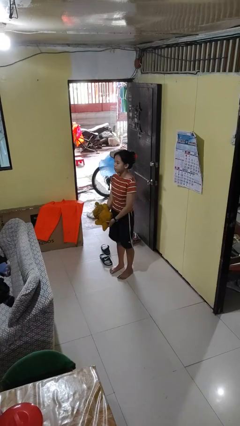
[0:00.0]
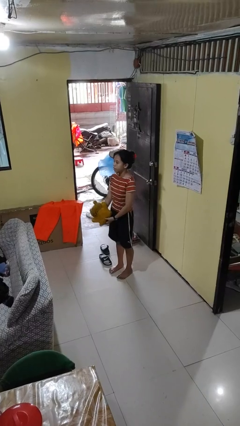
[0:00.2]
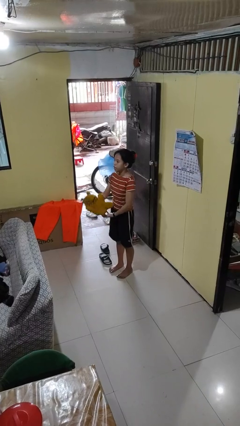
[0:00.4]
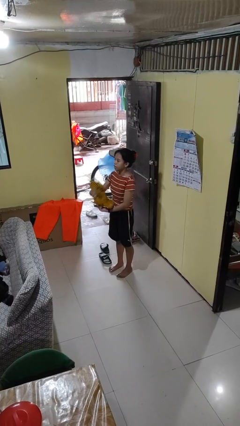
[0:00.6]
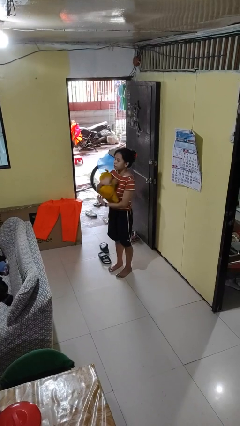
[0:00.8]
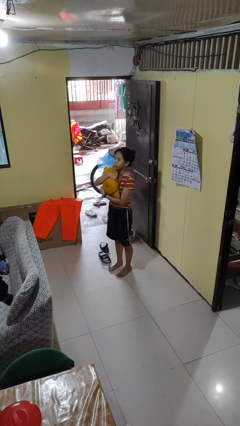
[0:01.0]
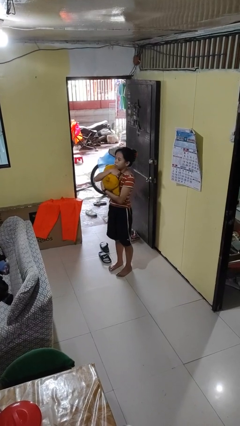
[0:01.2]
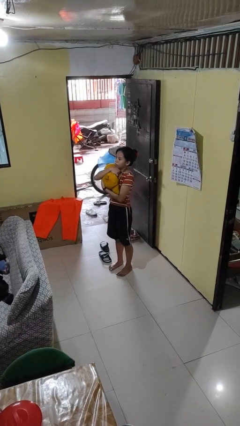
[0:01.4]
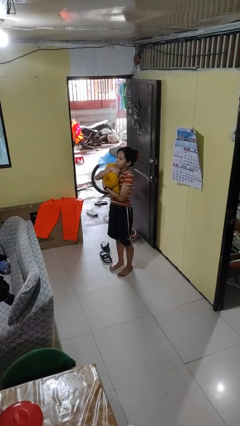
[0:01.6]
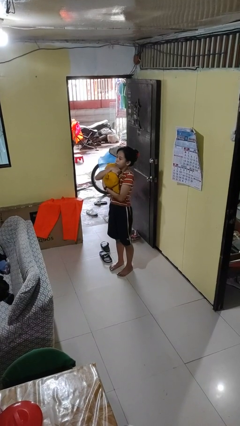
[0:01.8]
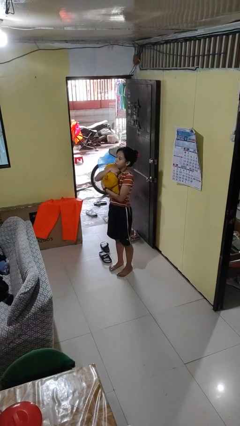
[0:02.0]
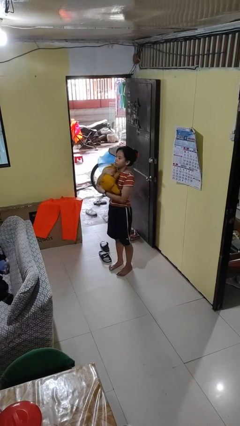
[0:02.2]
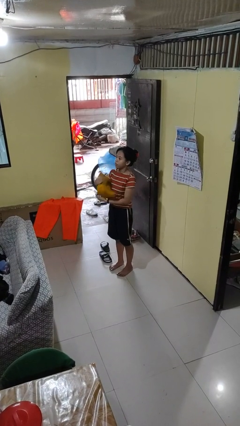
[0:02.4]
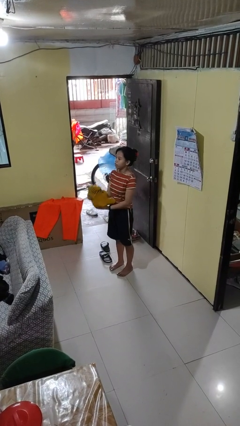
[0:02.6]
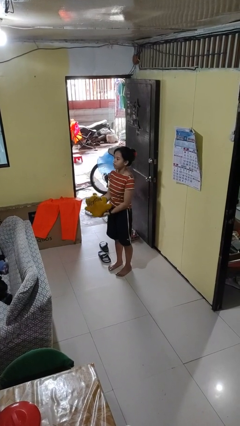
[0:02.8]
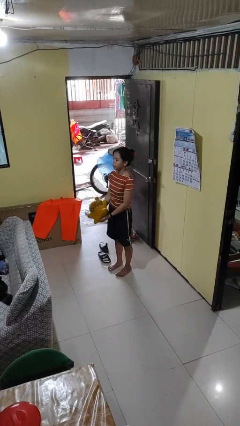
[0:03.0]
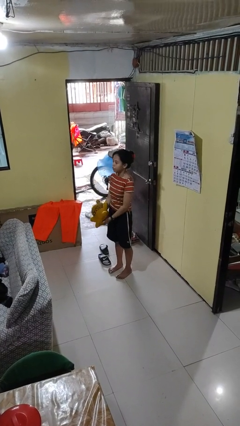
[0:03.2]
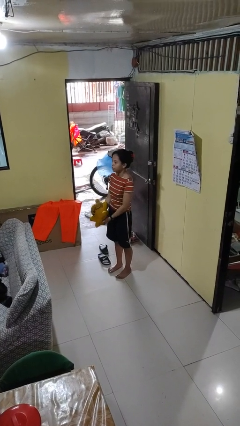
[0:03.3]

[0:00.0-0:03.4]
person hugs stuffed animal

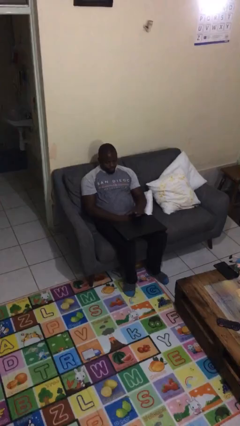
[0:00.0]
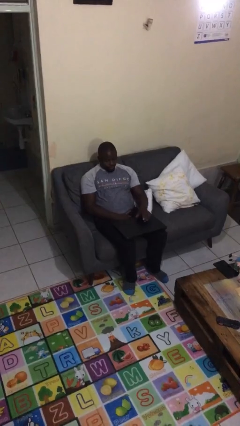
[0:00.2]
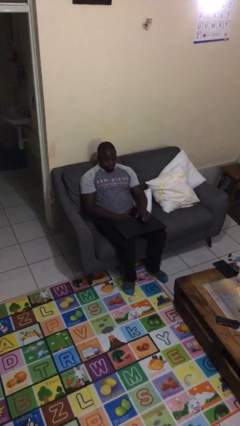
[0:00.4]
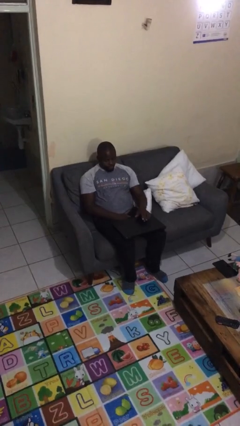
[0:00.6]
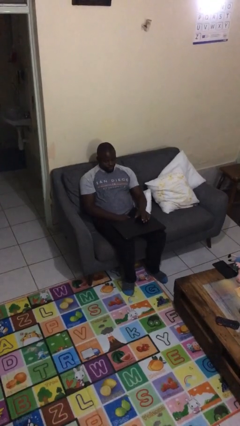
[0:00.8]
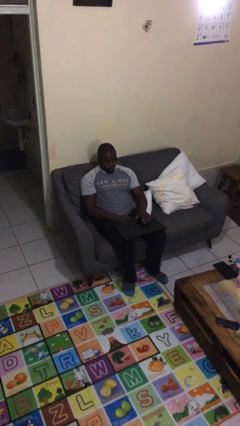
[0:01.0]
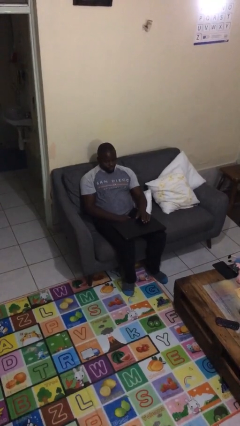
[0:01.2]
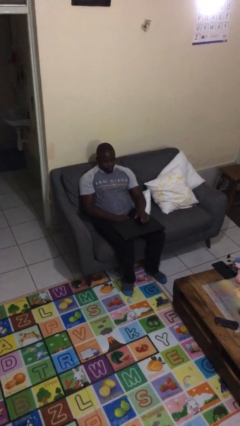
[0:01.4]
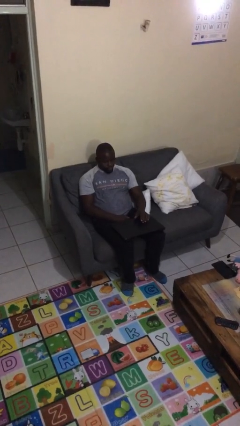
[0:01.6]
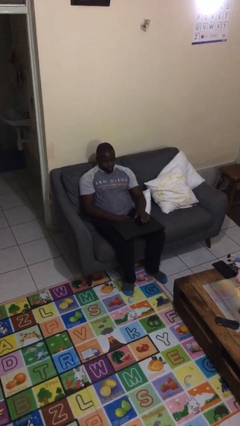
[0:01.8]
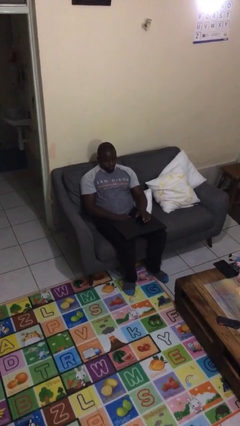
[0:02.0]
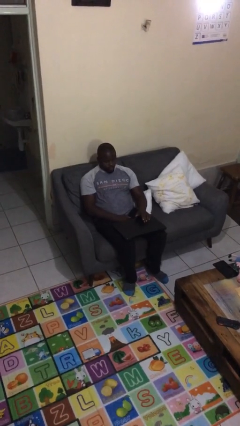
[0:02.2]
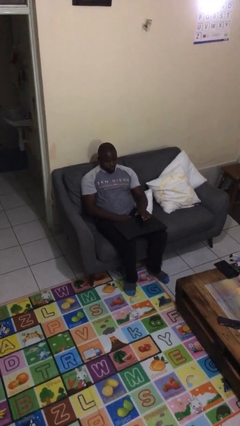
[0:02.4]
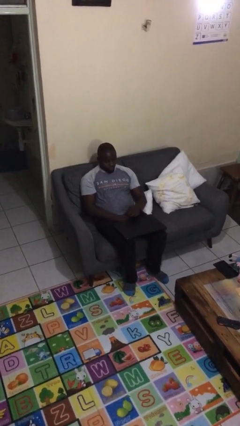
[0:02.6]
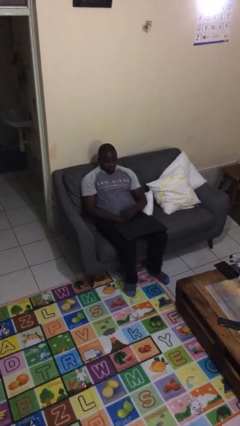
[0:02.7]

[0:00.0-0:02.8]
person taps object with finger

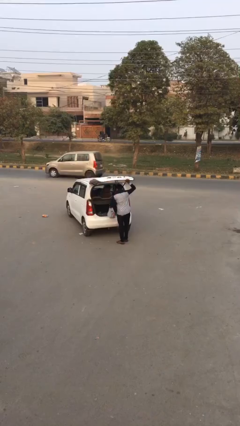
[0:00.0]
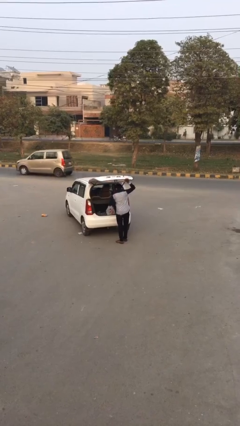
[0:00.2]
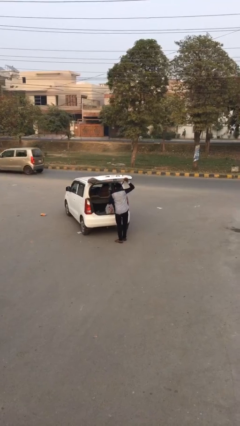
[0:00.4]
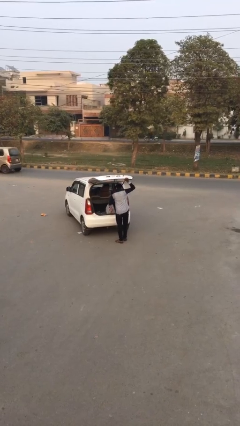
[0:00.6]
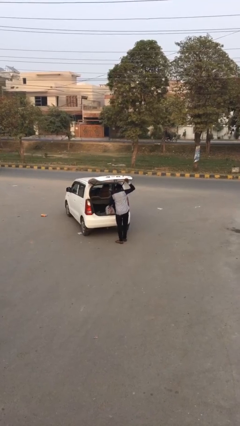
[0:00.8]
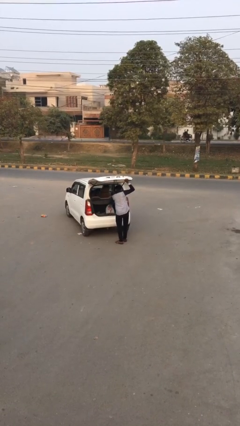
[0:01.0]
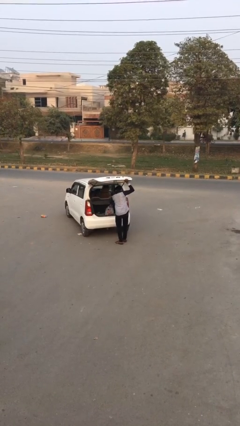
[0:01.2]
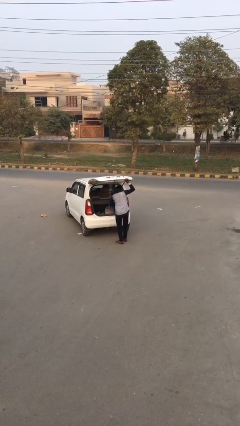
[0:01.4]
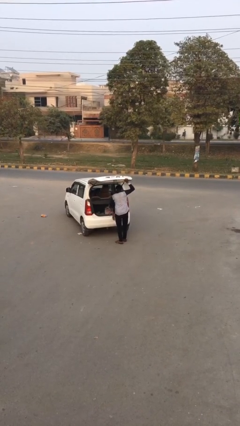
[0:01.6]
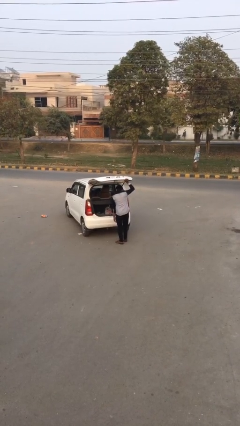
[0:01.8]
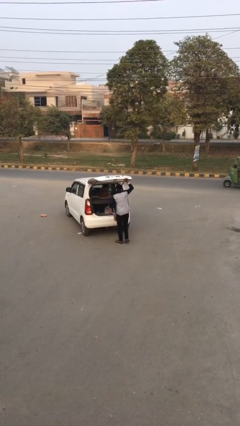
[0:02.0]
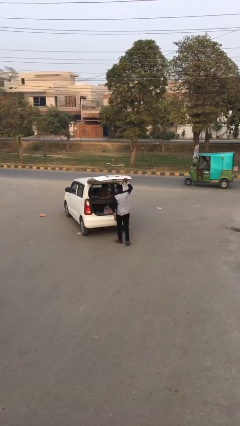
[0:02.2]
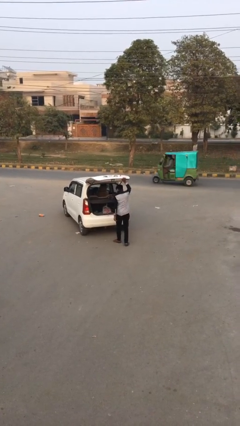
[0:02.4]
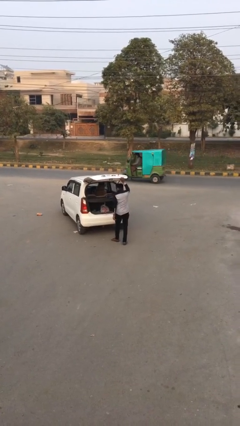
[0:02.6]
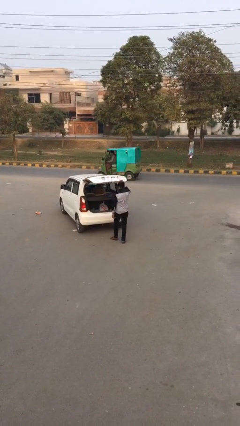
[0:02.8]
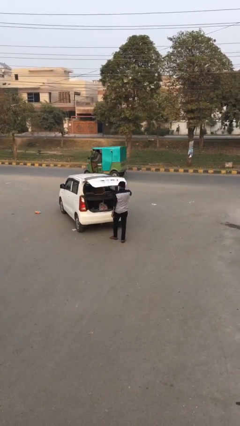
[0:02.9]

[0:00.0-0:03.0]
person loads car

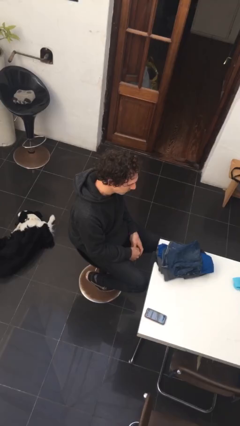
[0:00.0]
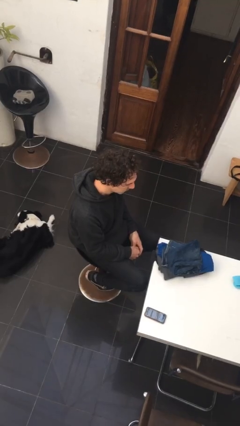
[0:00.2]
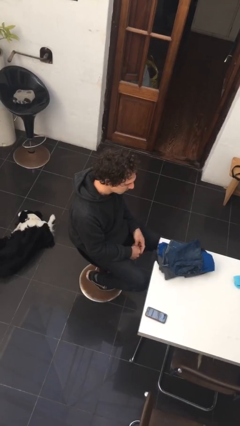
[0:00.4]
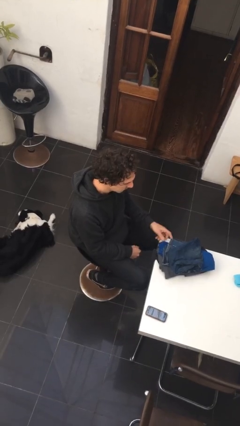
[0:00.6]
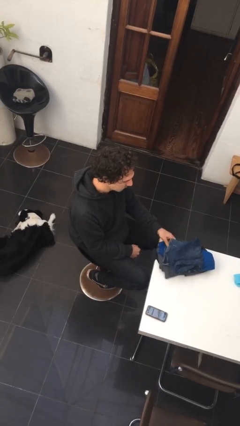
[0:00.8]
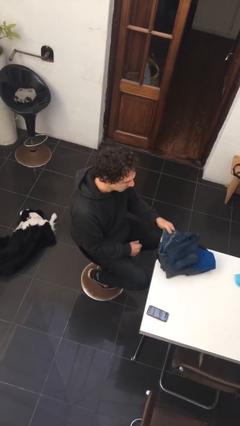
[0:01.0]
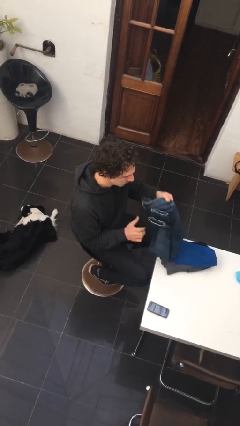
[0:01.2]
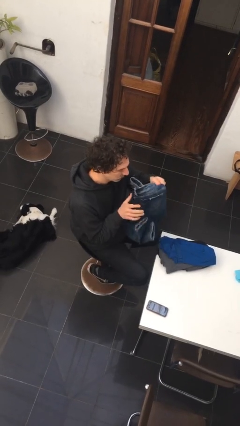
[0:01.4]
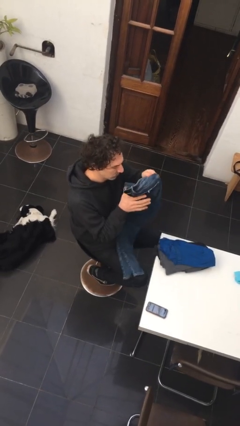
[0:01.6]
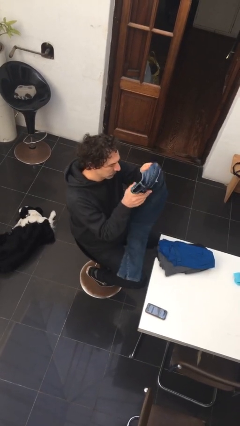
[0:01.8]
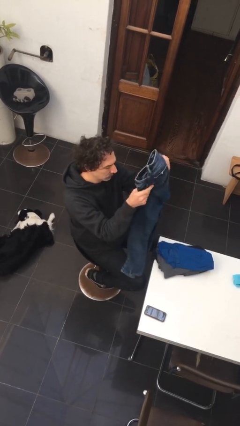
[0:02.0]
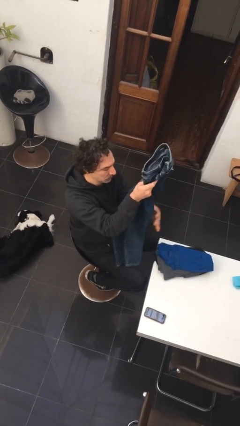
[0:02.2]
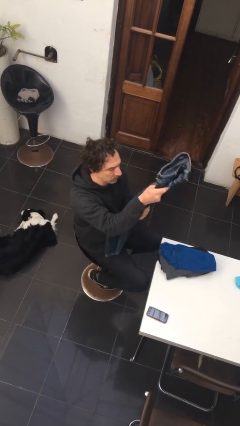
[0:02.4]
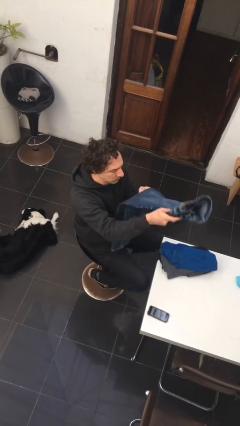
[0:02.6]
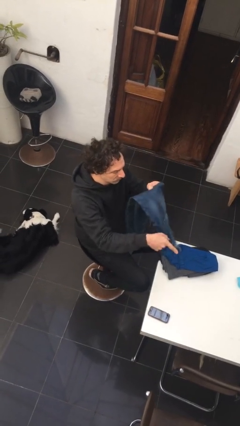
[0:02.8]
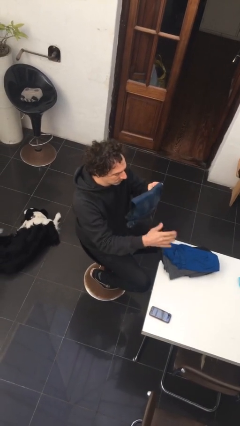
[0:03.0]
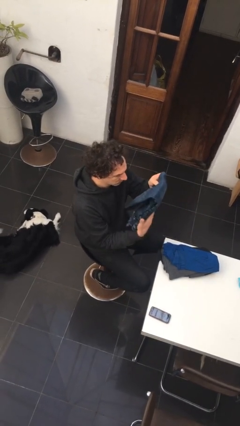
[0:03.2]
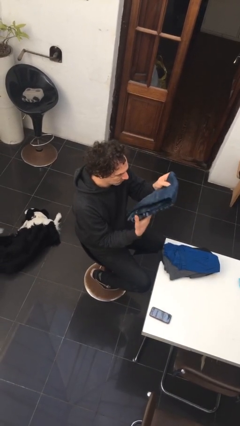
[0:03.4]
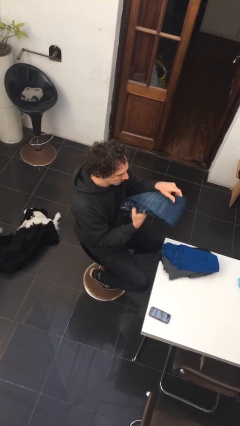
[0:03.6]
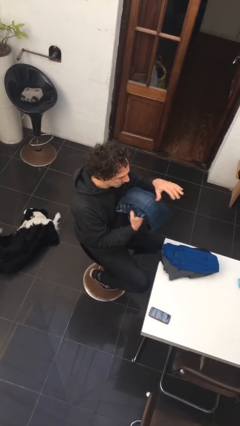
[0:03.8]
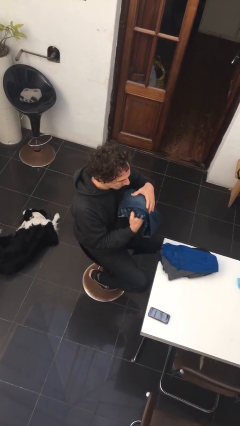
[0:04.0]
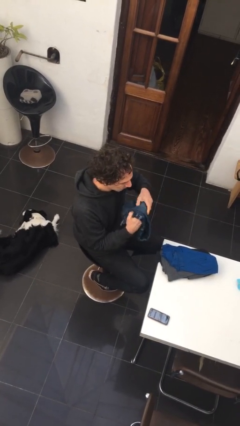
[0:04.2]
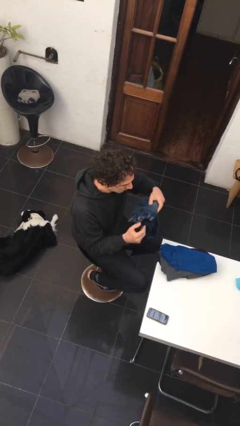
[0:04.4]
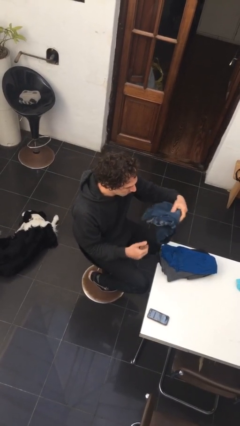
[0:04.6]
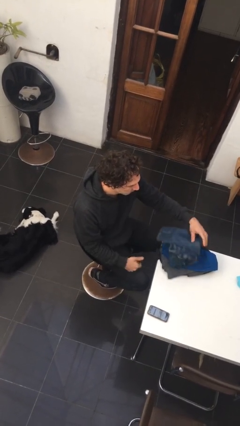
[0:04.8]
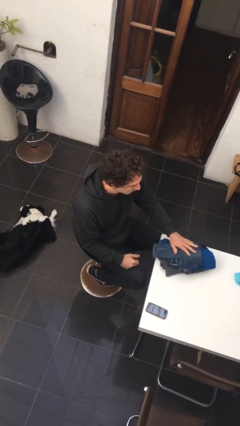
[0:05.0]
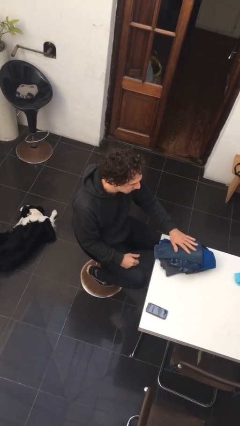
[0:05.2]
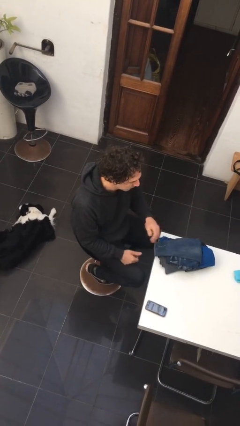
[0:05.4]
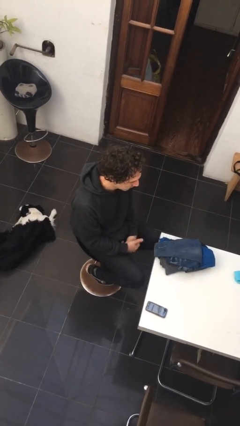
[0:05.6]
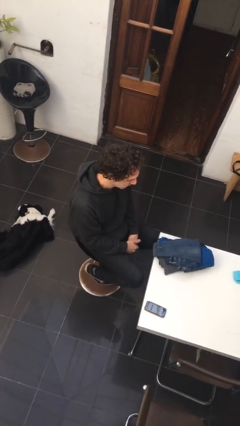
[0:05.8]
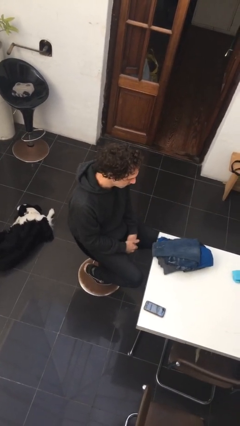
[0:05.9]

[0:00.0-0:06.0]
person folds pants

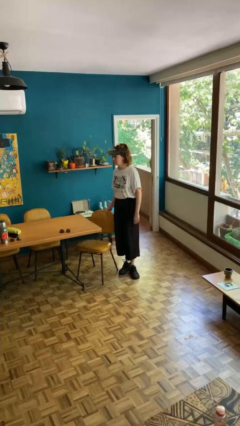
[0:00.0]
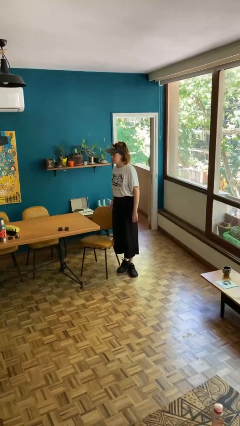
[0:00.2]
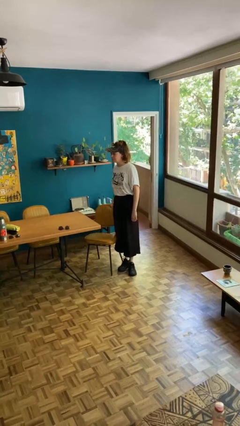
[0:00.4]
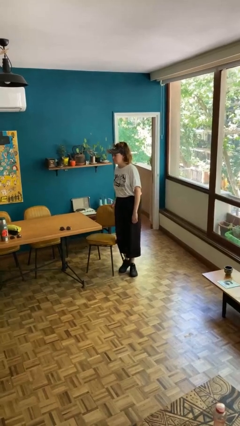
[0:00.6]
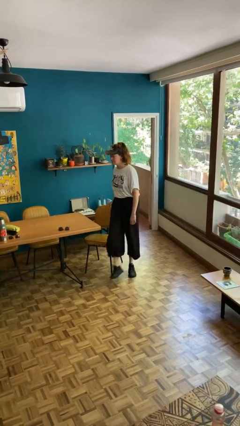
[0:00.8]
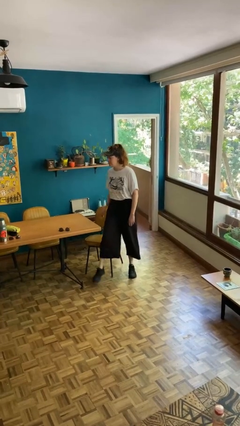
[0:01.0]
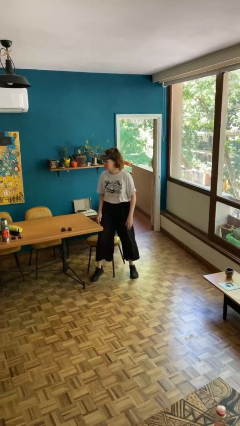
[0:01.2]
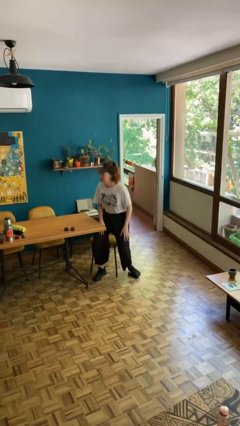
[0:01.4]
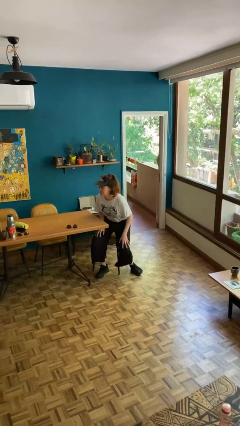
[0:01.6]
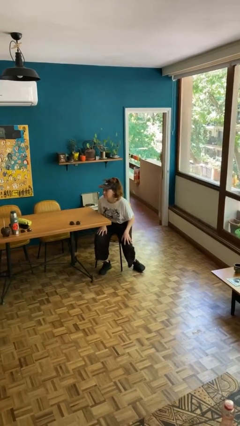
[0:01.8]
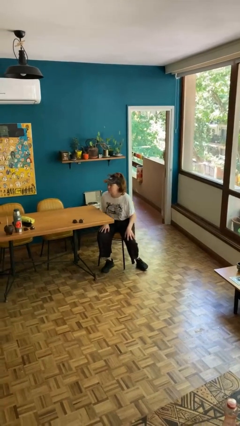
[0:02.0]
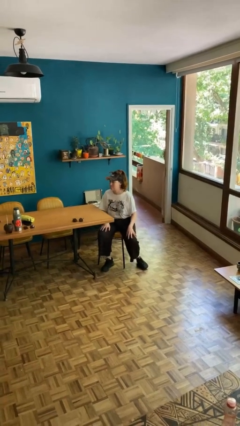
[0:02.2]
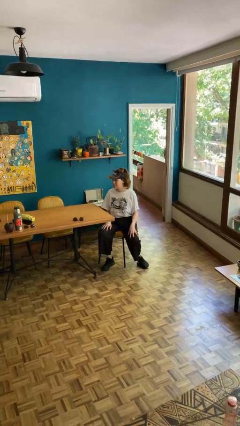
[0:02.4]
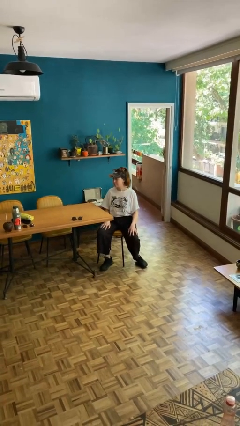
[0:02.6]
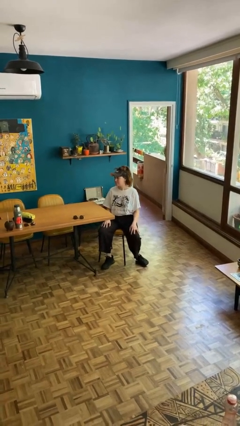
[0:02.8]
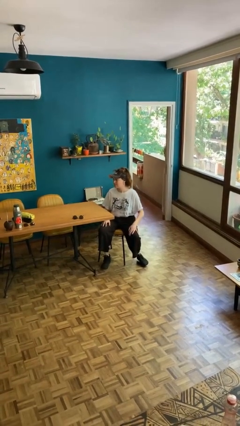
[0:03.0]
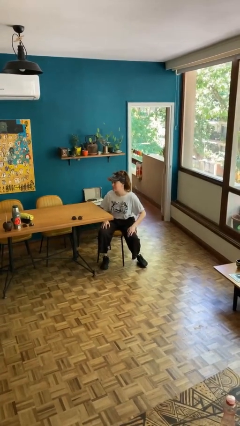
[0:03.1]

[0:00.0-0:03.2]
person sits down
